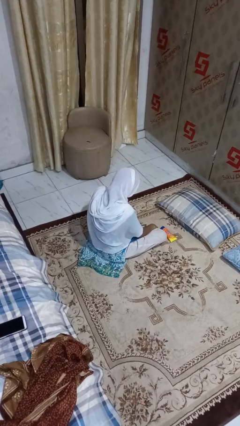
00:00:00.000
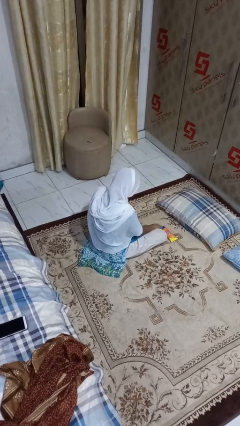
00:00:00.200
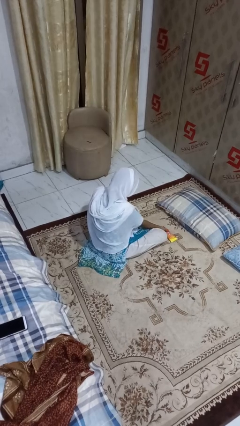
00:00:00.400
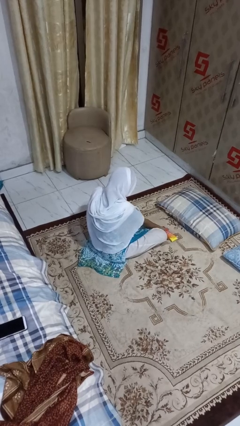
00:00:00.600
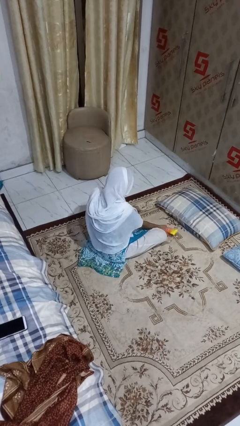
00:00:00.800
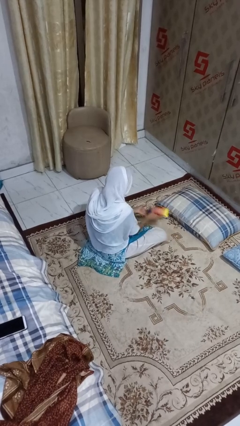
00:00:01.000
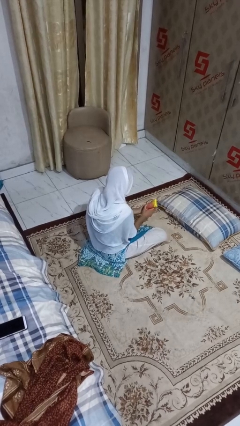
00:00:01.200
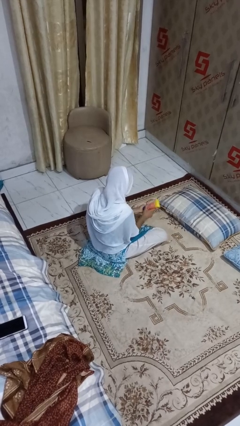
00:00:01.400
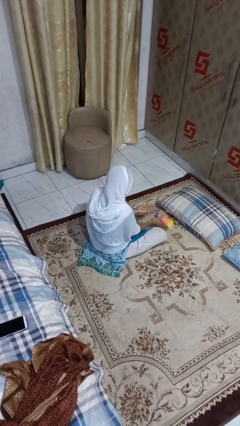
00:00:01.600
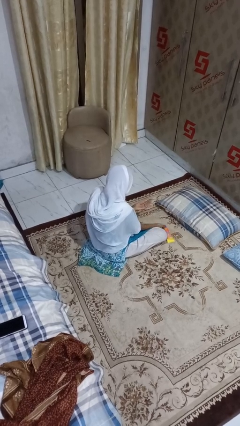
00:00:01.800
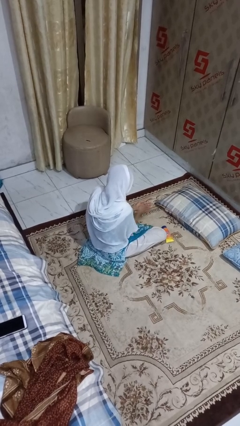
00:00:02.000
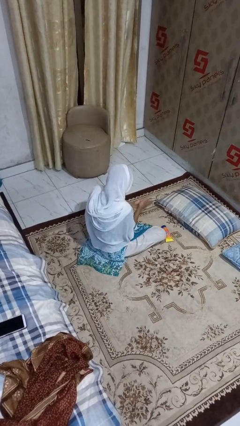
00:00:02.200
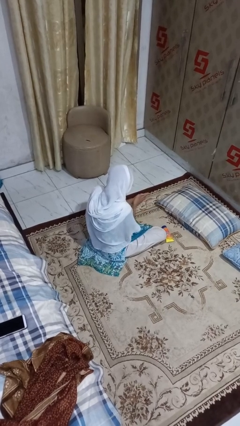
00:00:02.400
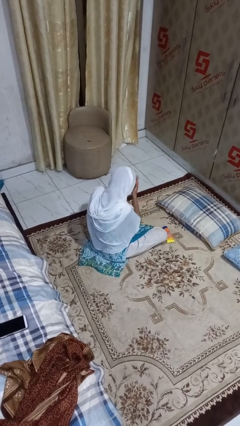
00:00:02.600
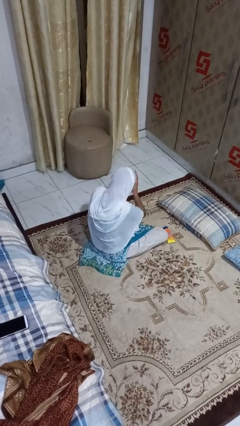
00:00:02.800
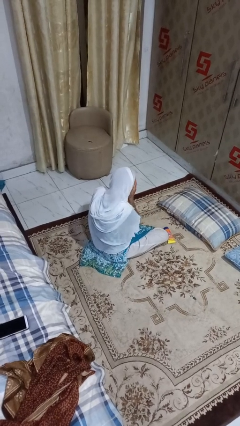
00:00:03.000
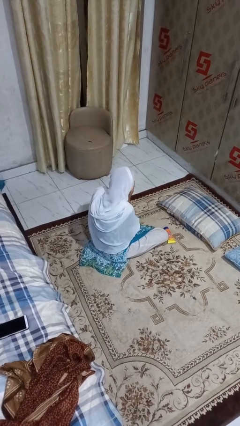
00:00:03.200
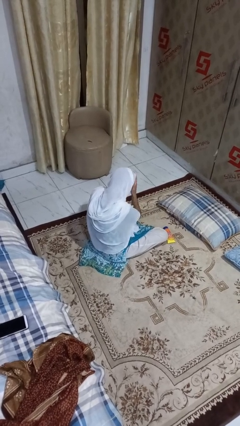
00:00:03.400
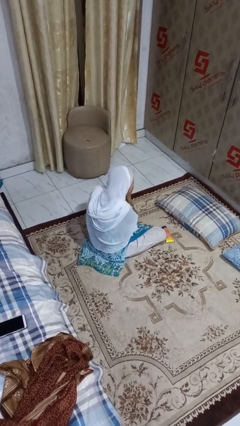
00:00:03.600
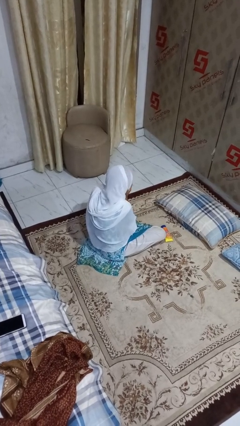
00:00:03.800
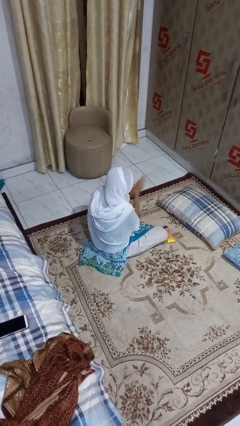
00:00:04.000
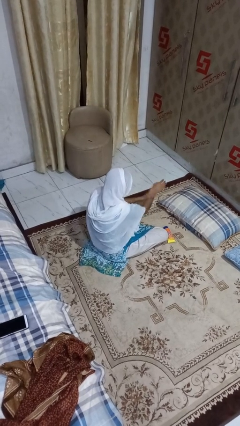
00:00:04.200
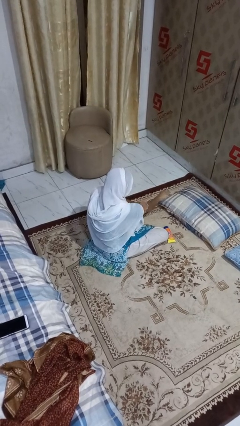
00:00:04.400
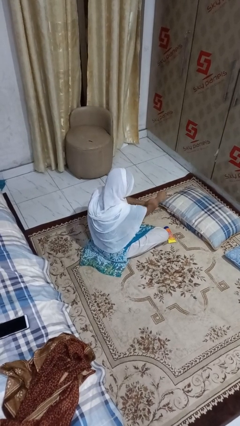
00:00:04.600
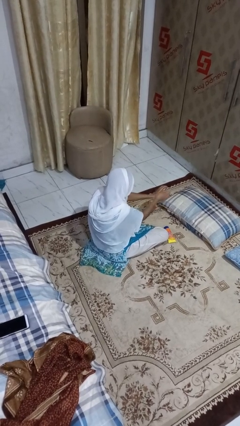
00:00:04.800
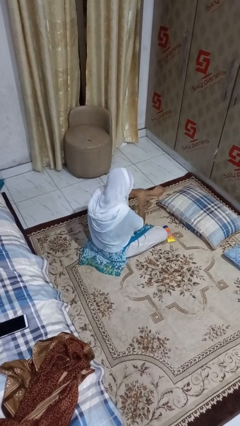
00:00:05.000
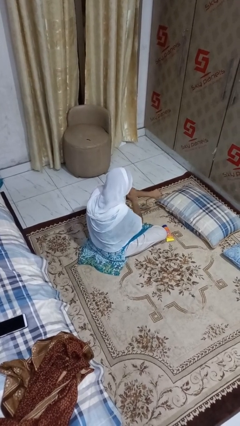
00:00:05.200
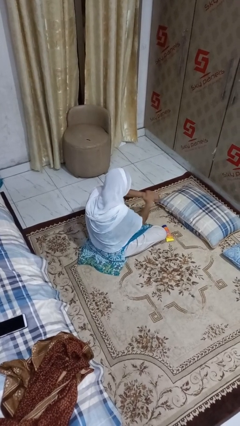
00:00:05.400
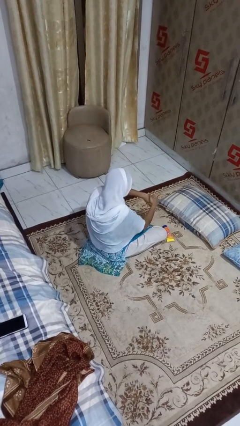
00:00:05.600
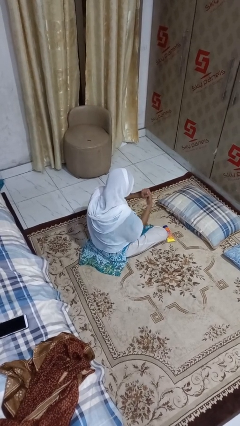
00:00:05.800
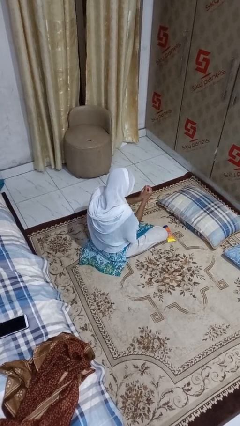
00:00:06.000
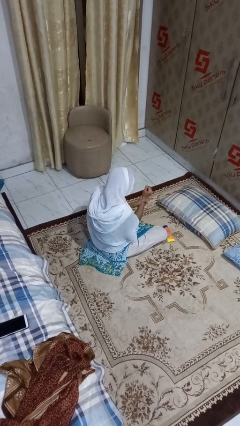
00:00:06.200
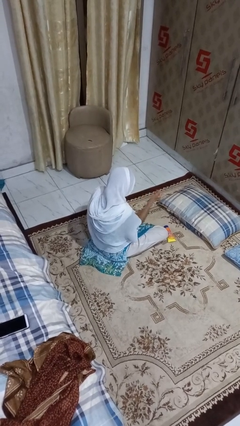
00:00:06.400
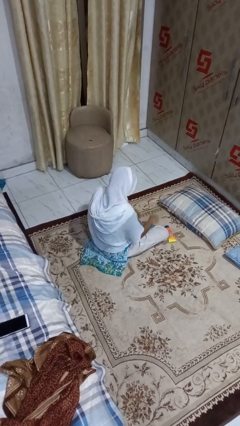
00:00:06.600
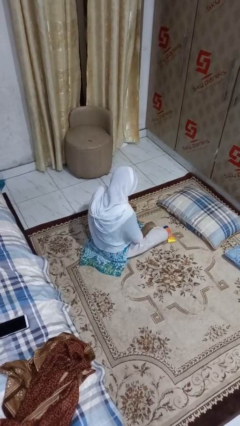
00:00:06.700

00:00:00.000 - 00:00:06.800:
person applies sunscreen

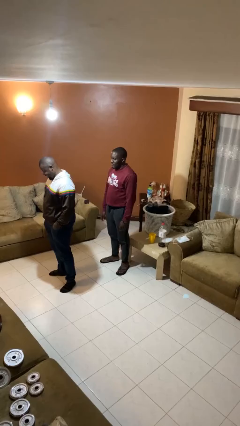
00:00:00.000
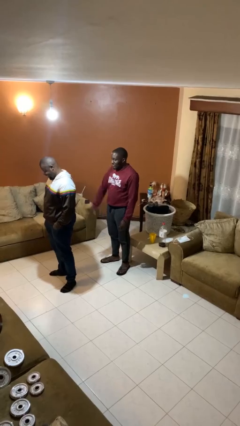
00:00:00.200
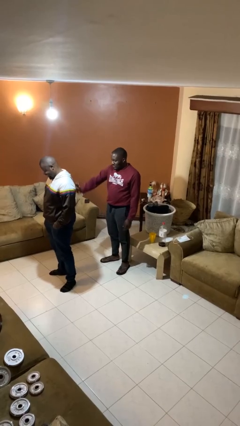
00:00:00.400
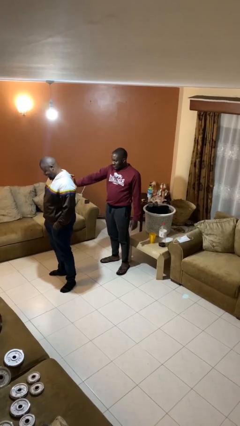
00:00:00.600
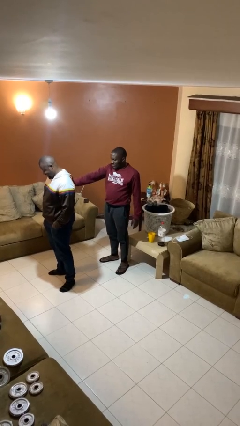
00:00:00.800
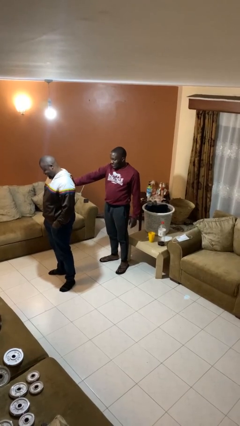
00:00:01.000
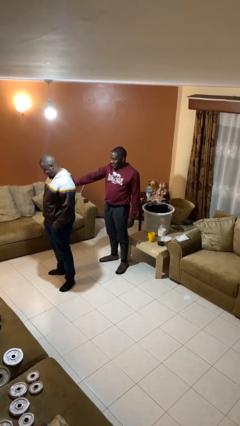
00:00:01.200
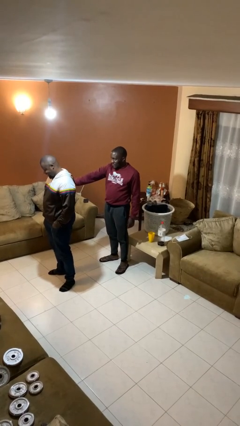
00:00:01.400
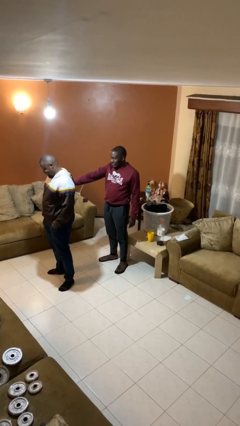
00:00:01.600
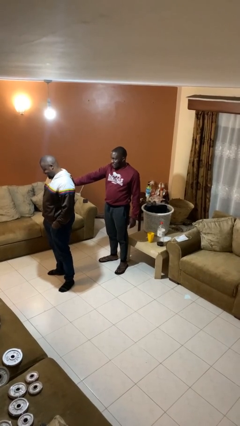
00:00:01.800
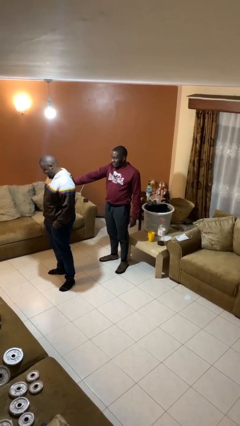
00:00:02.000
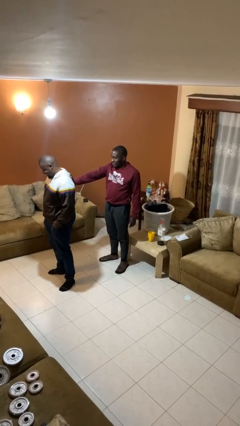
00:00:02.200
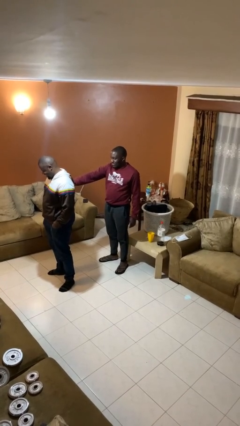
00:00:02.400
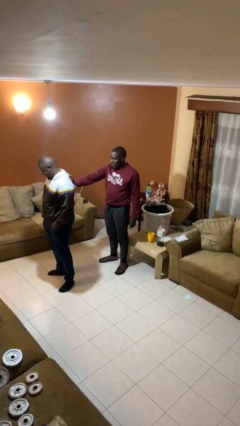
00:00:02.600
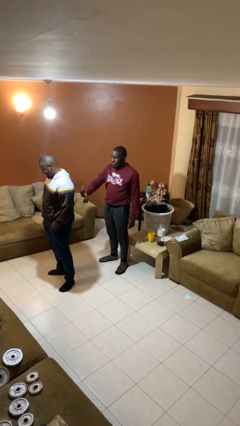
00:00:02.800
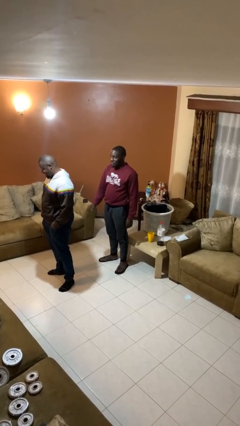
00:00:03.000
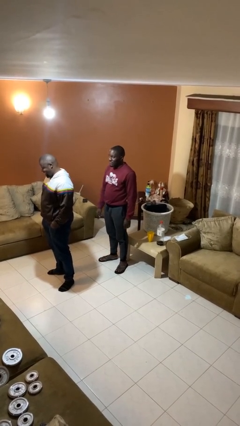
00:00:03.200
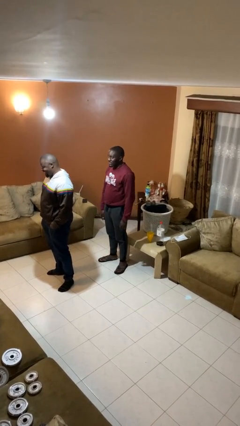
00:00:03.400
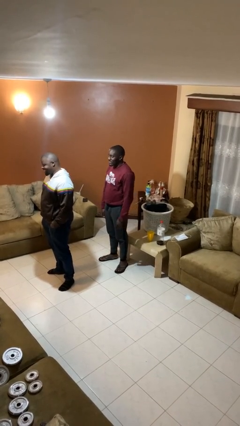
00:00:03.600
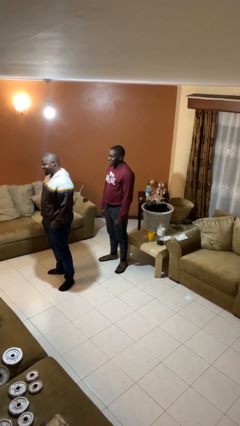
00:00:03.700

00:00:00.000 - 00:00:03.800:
person touches back of person

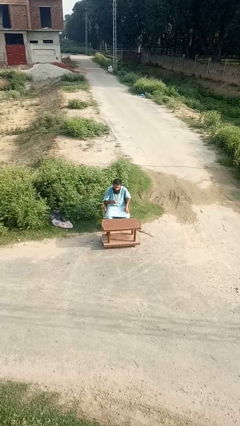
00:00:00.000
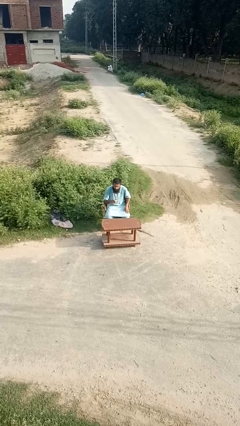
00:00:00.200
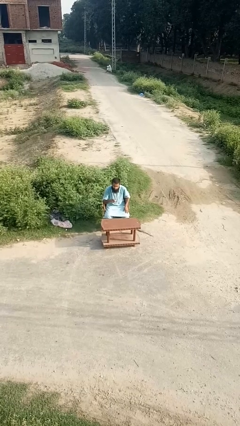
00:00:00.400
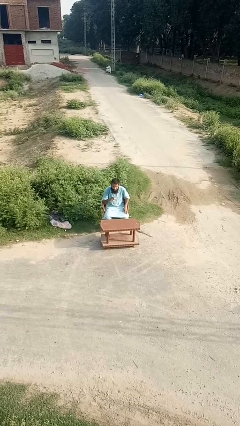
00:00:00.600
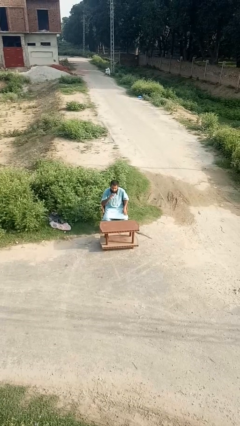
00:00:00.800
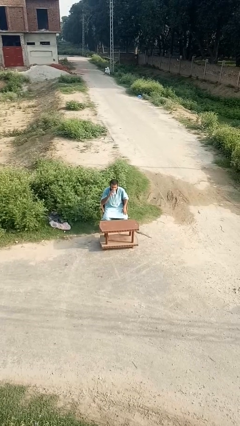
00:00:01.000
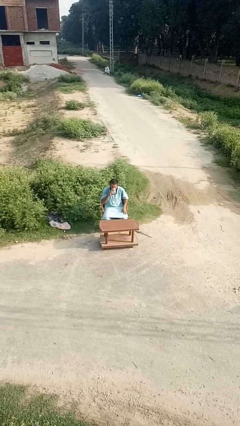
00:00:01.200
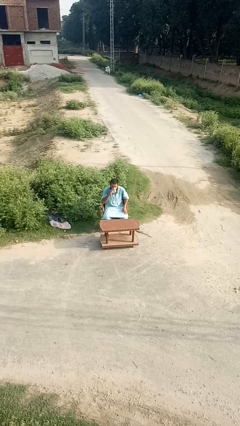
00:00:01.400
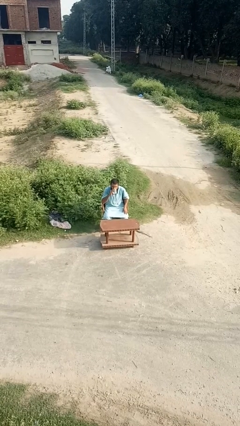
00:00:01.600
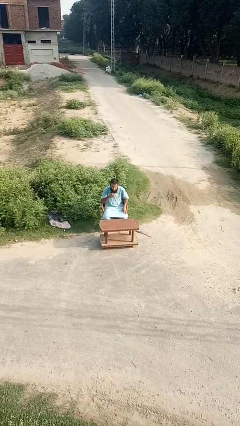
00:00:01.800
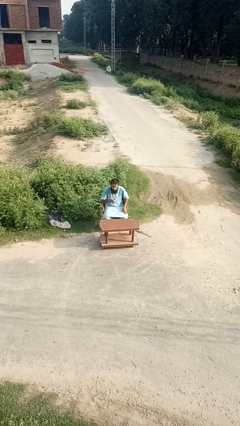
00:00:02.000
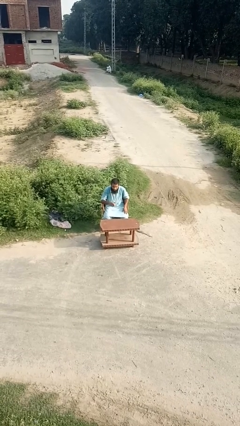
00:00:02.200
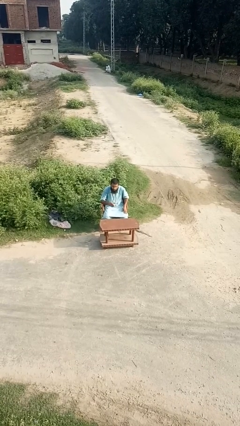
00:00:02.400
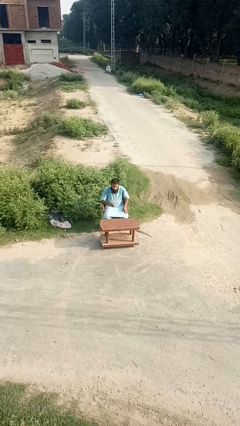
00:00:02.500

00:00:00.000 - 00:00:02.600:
person drinks from mug

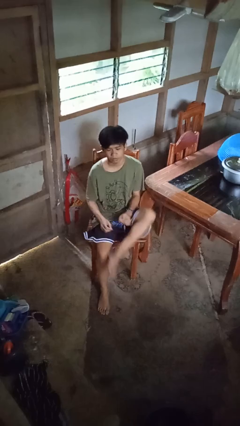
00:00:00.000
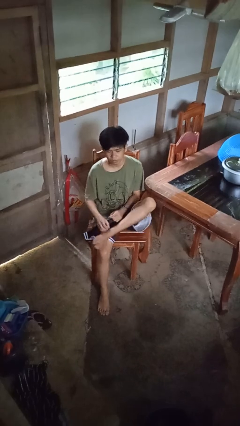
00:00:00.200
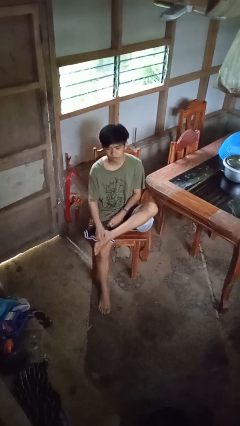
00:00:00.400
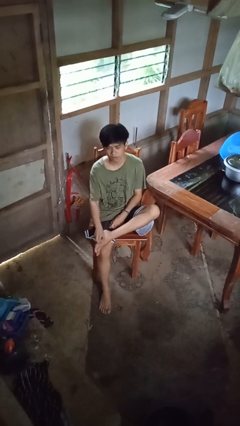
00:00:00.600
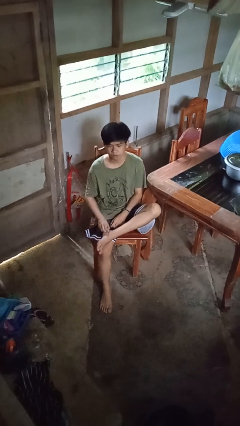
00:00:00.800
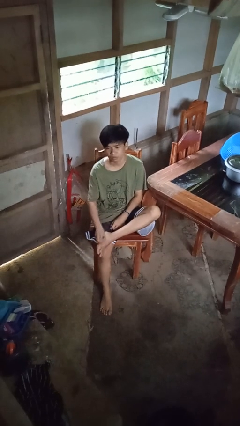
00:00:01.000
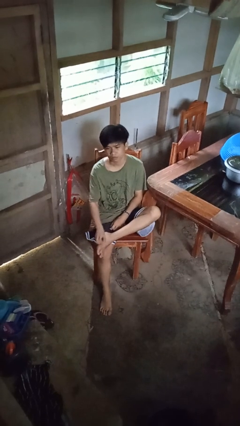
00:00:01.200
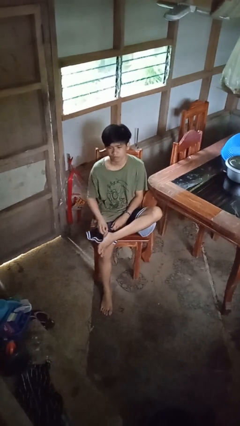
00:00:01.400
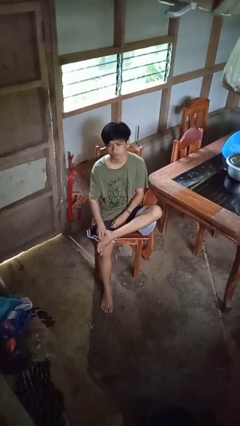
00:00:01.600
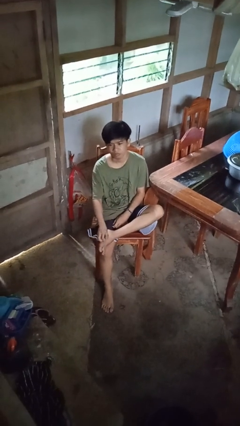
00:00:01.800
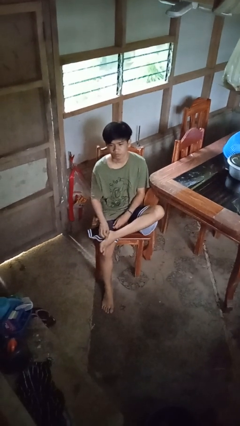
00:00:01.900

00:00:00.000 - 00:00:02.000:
person rubs foot

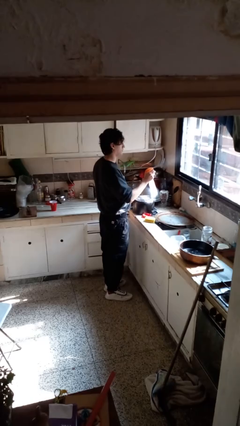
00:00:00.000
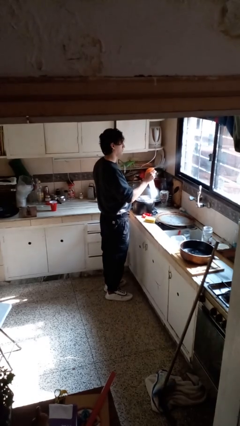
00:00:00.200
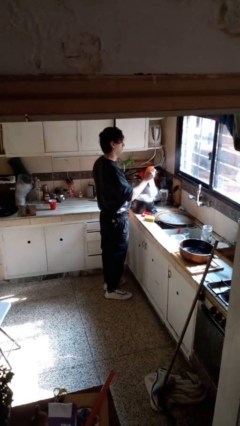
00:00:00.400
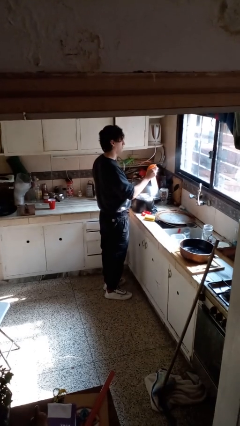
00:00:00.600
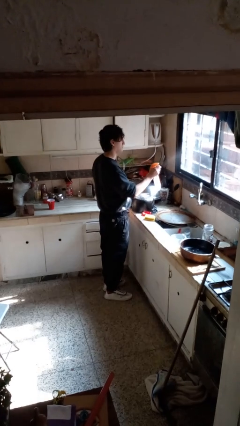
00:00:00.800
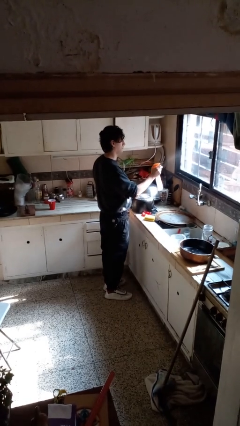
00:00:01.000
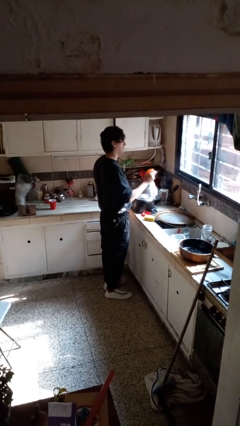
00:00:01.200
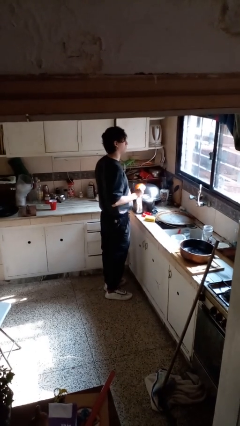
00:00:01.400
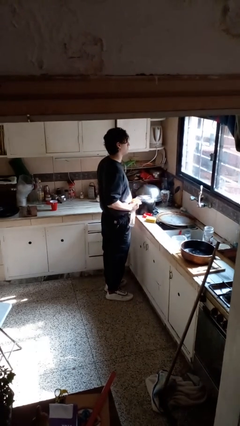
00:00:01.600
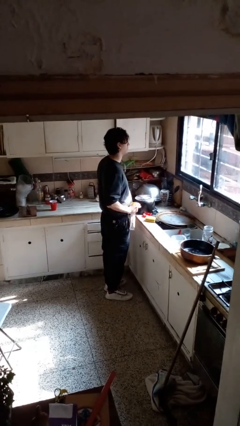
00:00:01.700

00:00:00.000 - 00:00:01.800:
person sprays from bottle

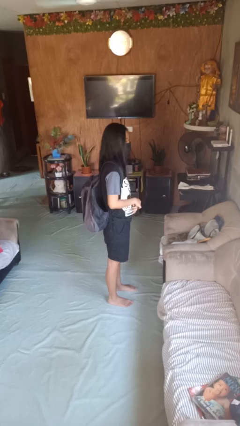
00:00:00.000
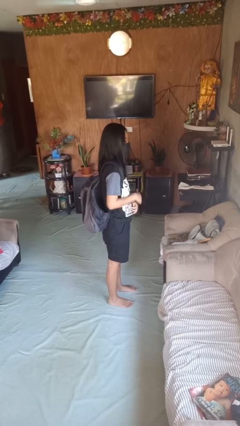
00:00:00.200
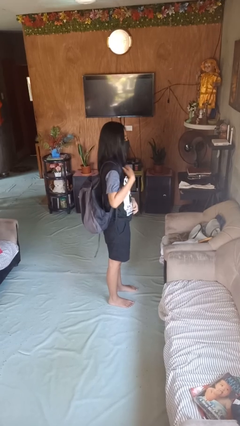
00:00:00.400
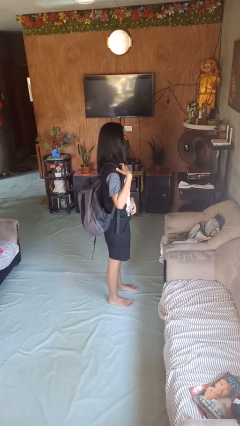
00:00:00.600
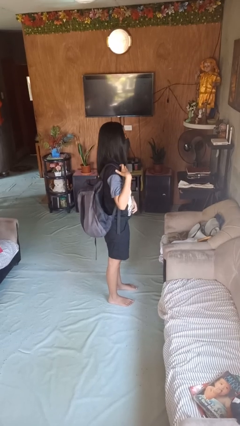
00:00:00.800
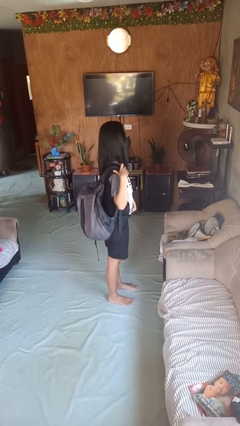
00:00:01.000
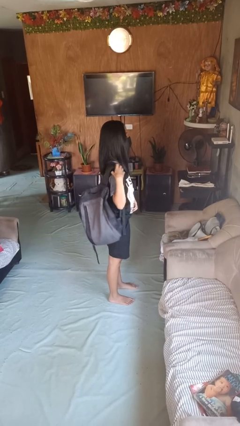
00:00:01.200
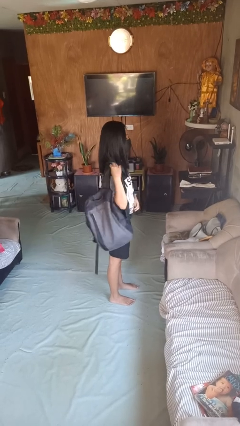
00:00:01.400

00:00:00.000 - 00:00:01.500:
person takes off backpack
